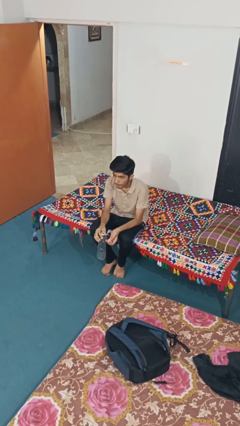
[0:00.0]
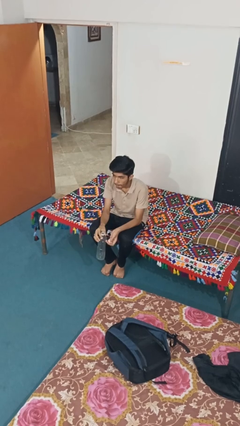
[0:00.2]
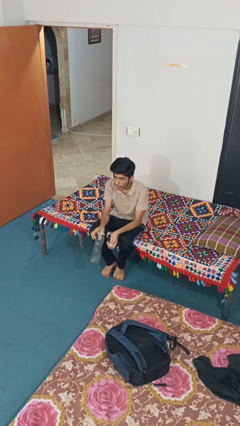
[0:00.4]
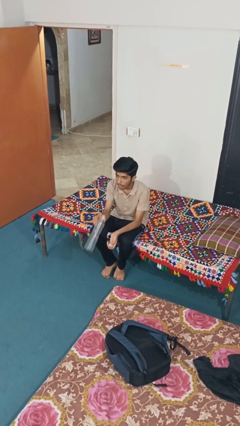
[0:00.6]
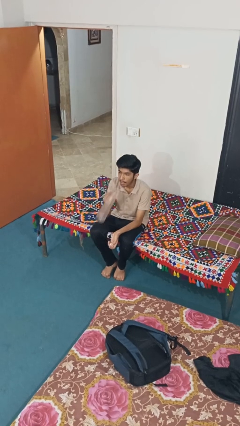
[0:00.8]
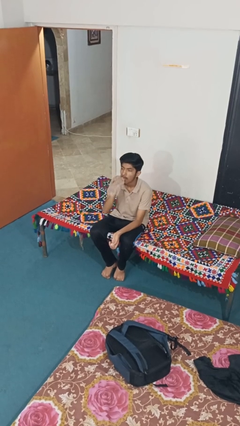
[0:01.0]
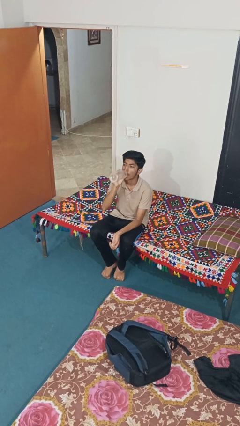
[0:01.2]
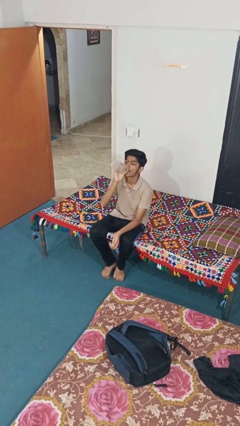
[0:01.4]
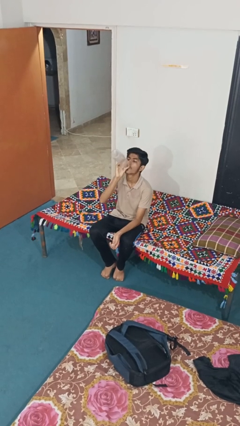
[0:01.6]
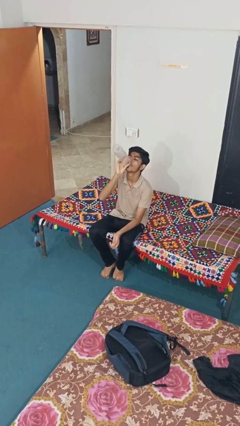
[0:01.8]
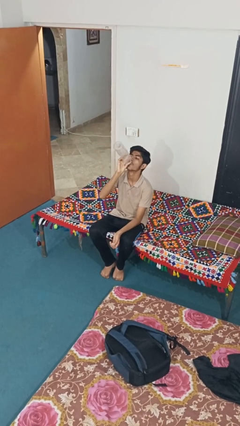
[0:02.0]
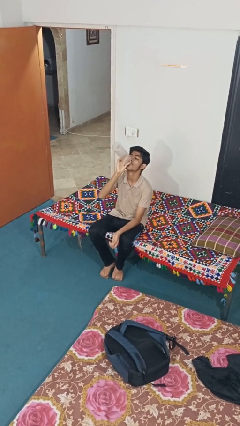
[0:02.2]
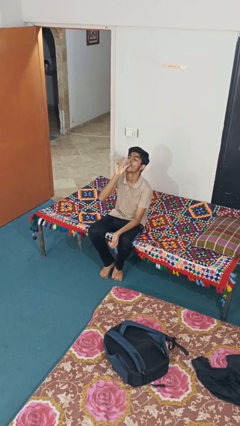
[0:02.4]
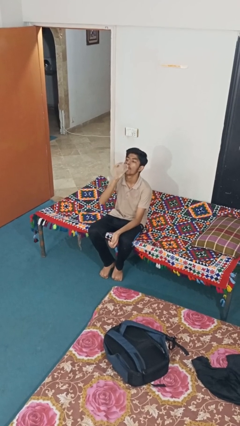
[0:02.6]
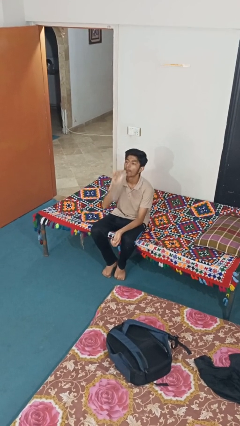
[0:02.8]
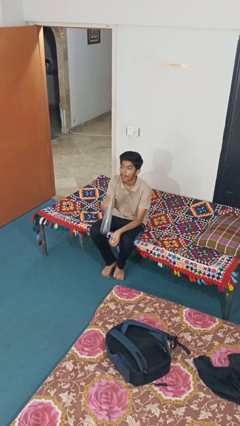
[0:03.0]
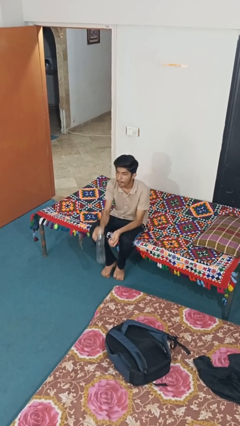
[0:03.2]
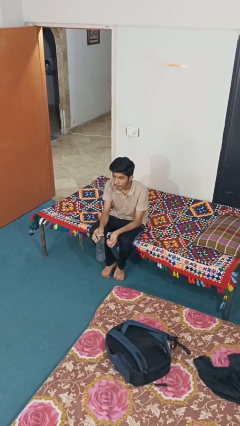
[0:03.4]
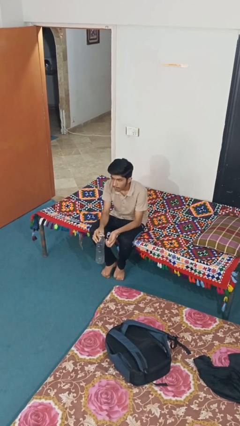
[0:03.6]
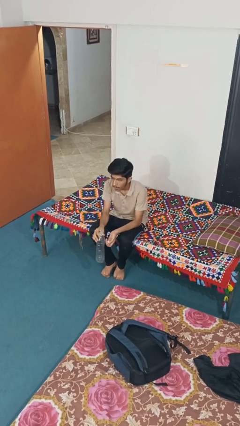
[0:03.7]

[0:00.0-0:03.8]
person drinks from bottle

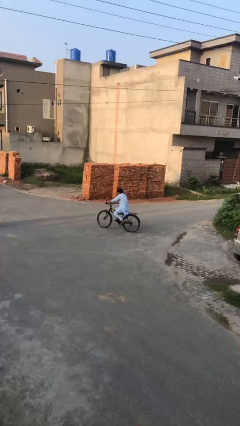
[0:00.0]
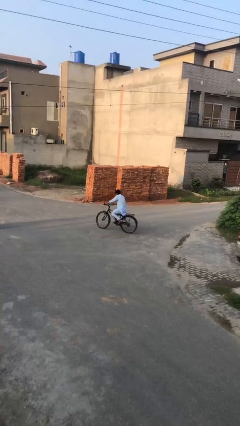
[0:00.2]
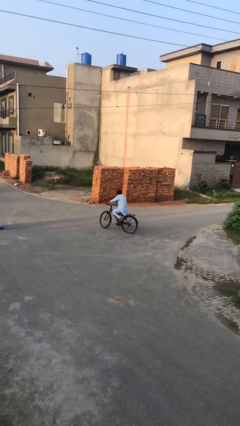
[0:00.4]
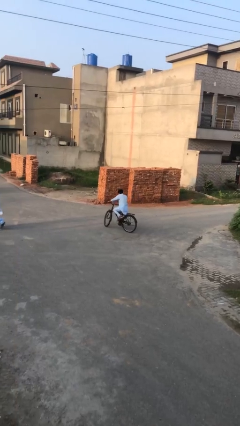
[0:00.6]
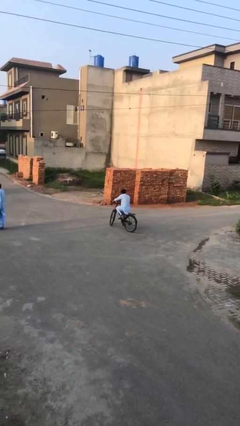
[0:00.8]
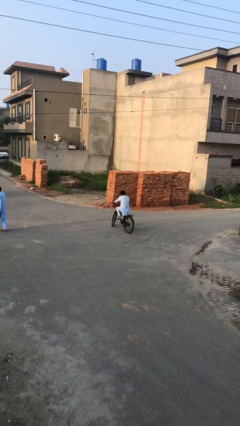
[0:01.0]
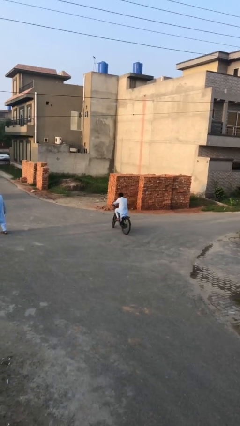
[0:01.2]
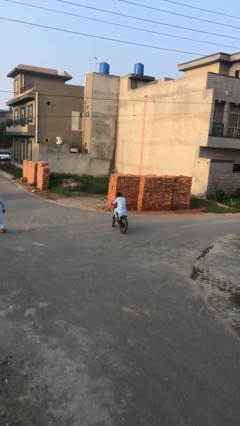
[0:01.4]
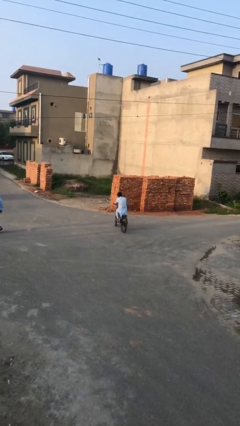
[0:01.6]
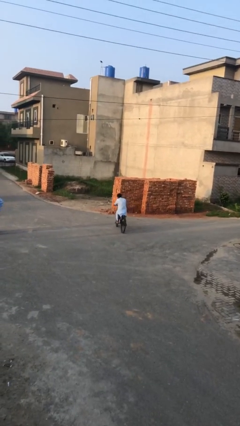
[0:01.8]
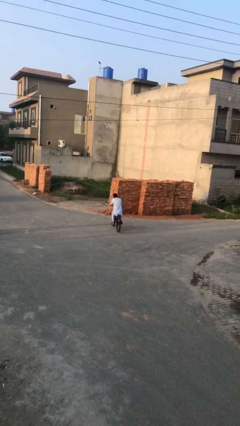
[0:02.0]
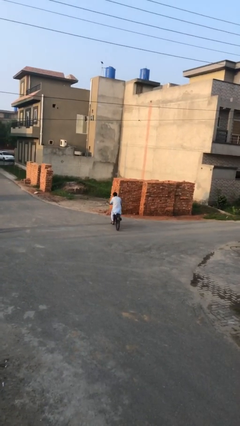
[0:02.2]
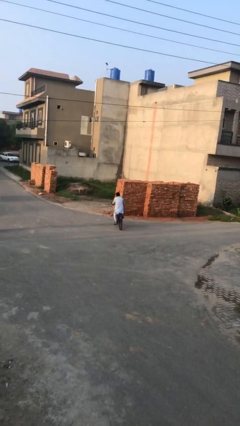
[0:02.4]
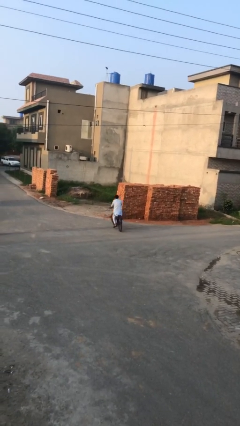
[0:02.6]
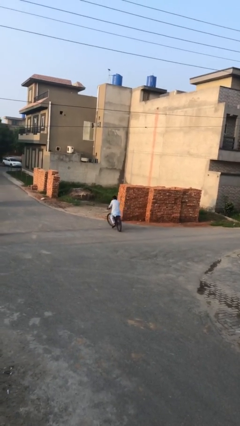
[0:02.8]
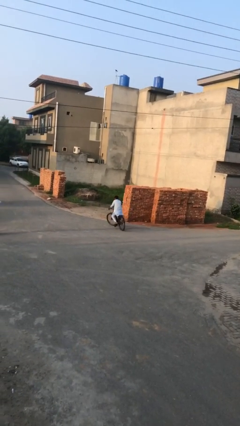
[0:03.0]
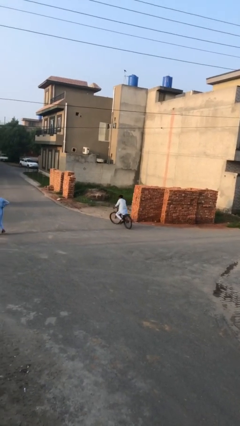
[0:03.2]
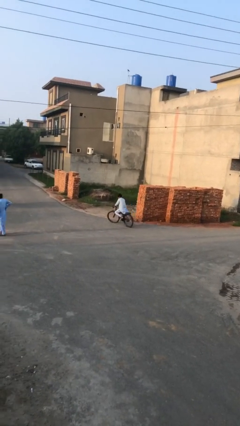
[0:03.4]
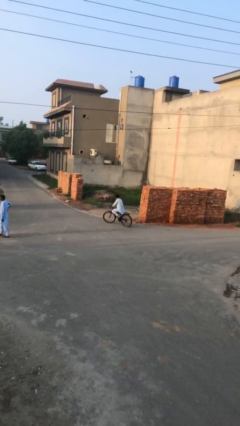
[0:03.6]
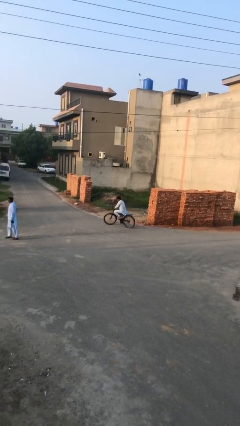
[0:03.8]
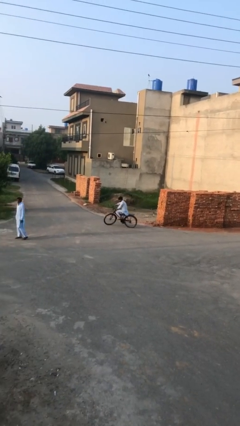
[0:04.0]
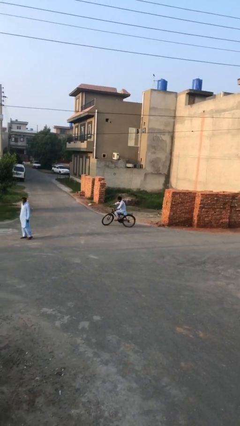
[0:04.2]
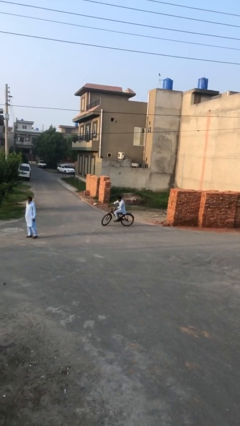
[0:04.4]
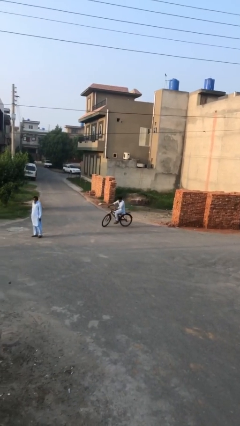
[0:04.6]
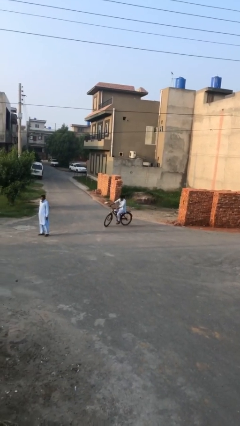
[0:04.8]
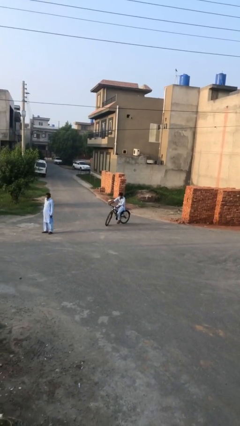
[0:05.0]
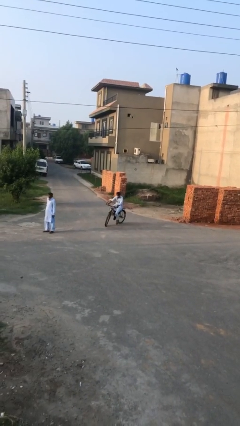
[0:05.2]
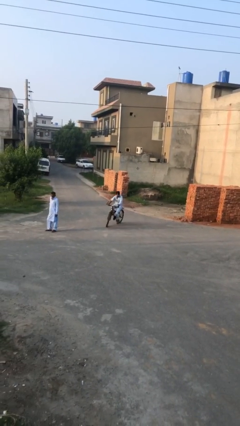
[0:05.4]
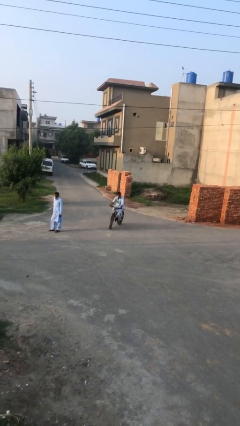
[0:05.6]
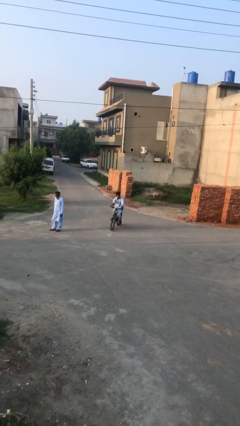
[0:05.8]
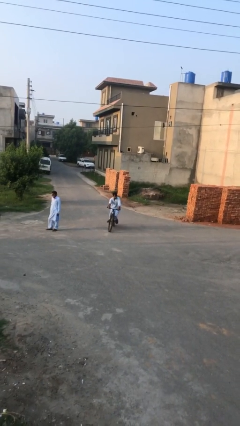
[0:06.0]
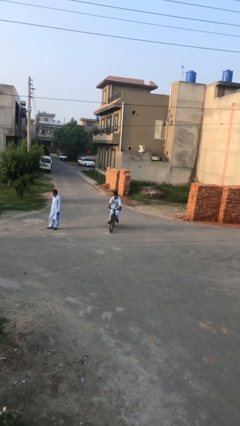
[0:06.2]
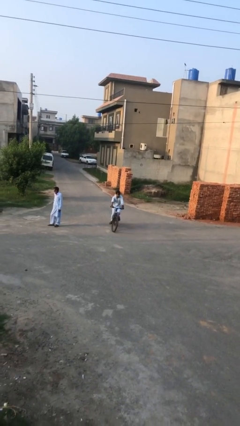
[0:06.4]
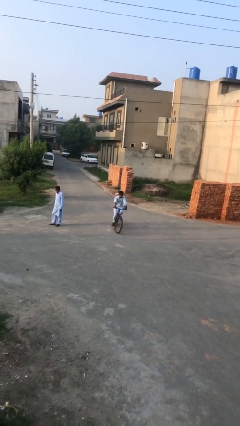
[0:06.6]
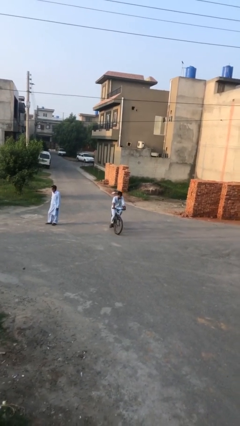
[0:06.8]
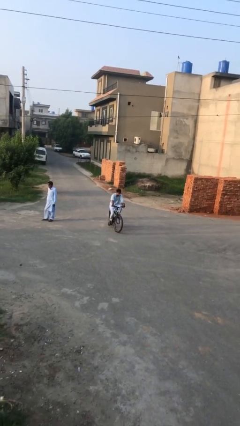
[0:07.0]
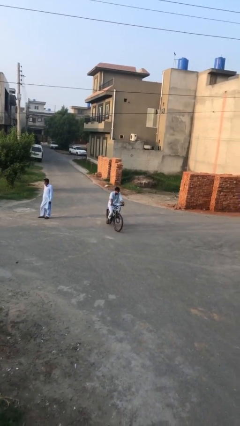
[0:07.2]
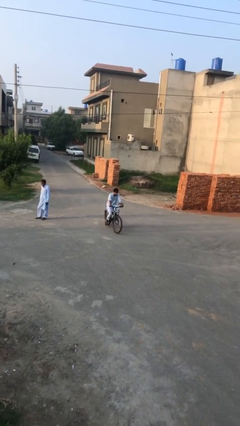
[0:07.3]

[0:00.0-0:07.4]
person rides bicycle

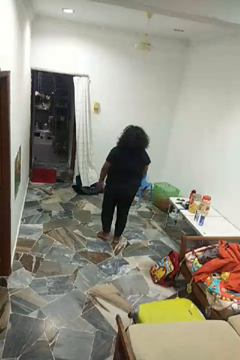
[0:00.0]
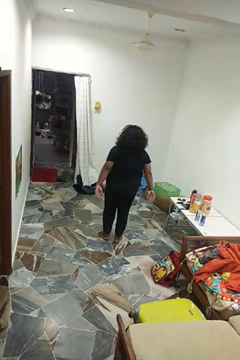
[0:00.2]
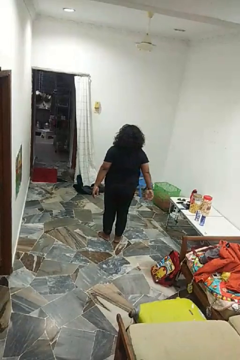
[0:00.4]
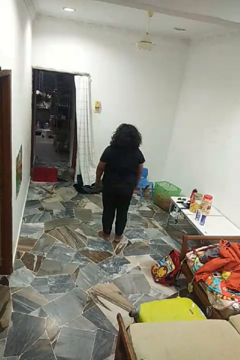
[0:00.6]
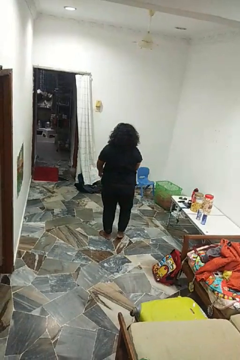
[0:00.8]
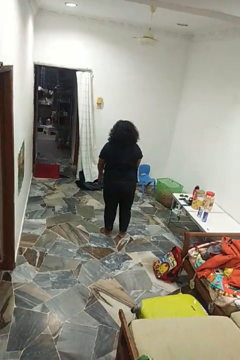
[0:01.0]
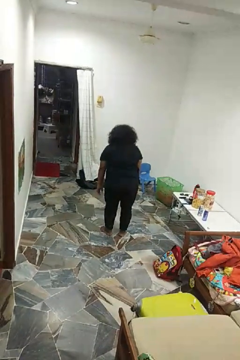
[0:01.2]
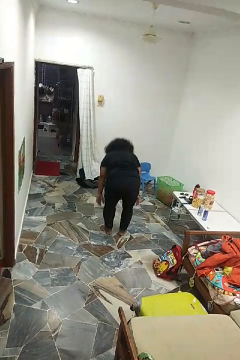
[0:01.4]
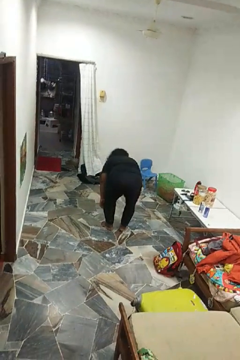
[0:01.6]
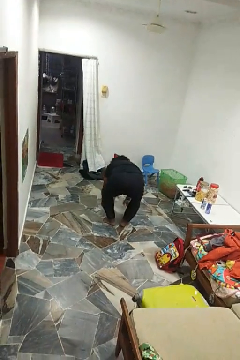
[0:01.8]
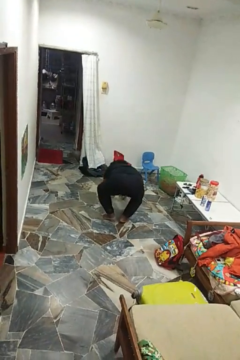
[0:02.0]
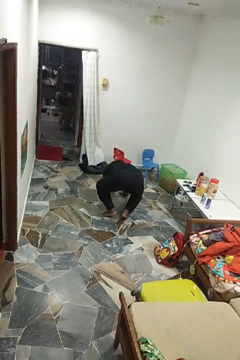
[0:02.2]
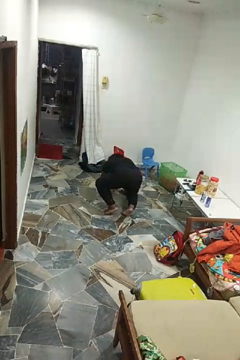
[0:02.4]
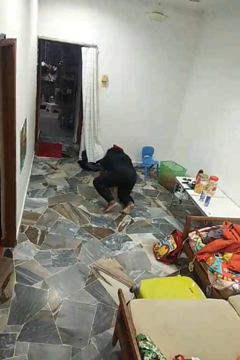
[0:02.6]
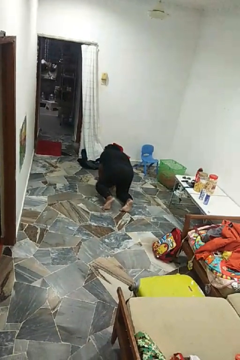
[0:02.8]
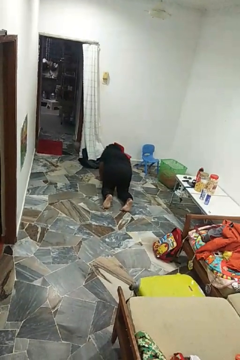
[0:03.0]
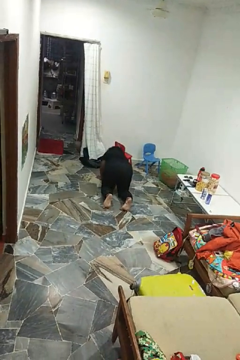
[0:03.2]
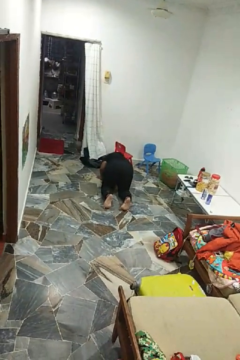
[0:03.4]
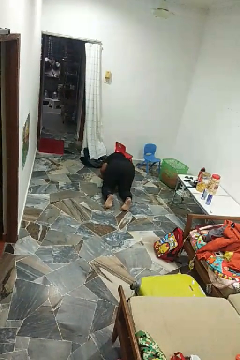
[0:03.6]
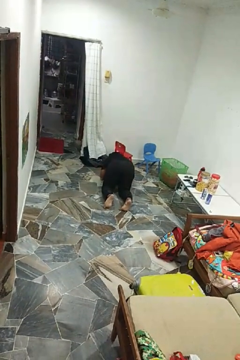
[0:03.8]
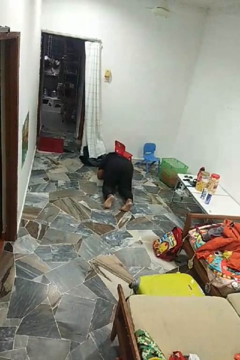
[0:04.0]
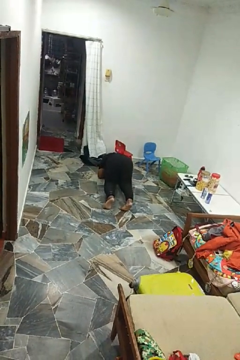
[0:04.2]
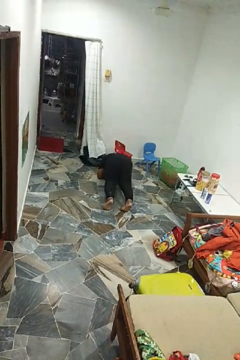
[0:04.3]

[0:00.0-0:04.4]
person exercises with plank

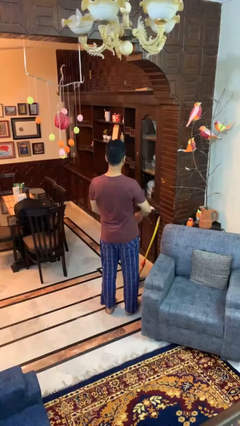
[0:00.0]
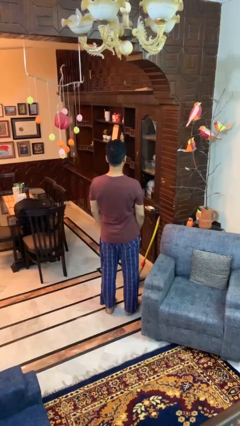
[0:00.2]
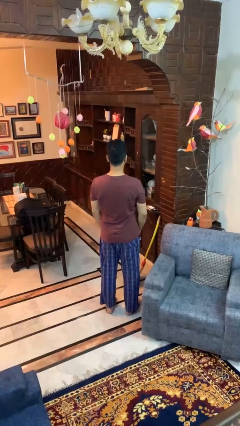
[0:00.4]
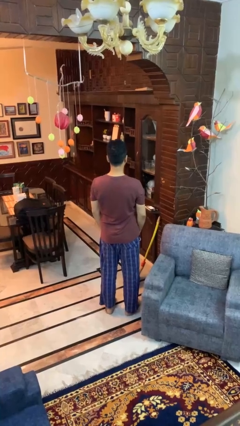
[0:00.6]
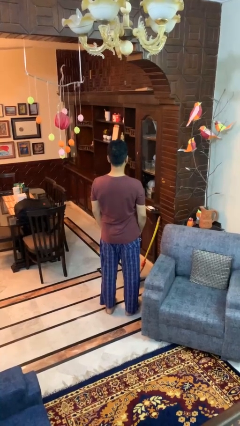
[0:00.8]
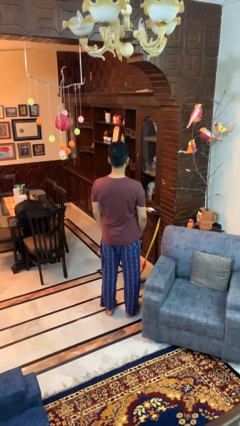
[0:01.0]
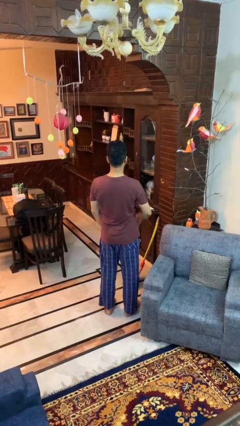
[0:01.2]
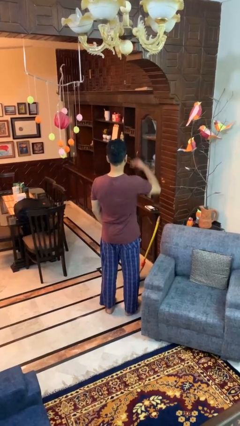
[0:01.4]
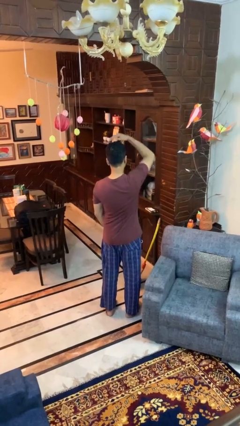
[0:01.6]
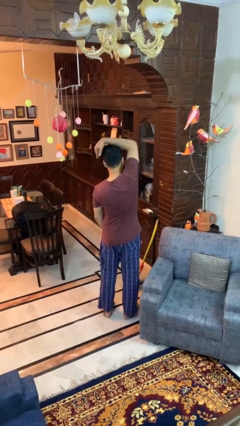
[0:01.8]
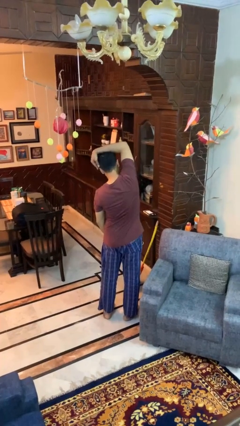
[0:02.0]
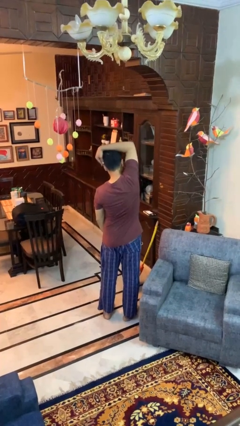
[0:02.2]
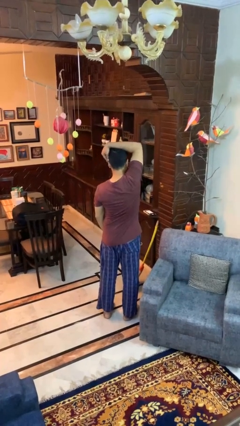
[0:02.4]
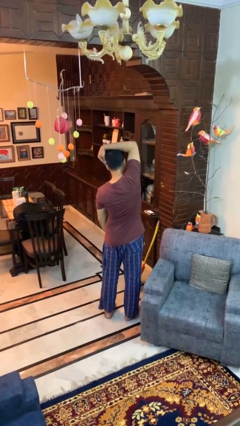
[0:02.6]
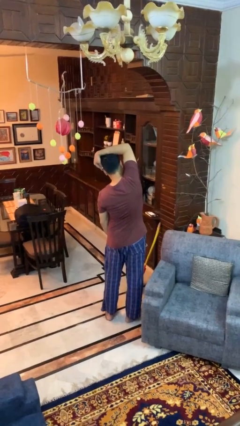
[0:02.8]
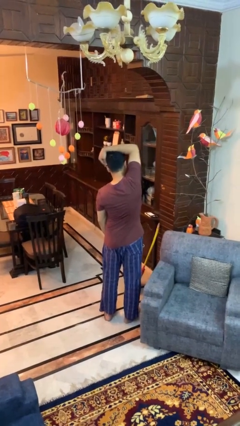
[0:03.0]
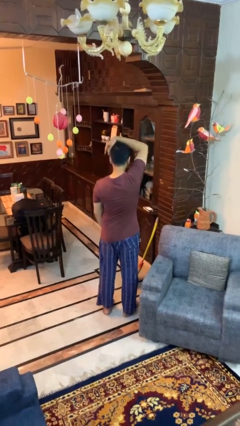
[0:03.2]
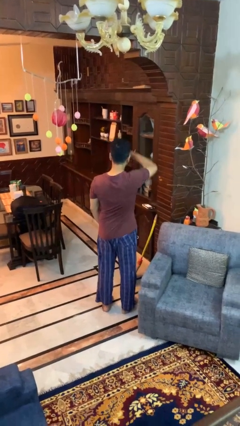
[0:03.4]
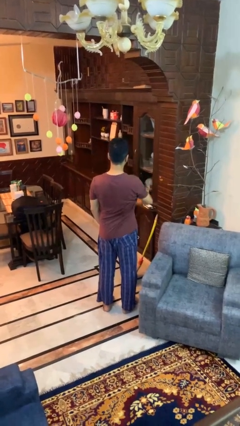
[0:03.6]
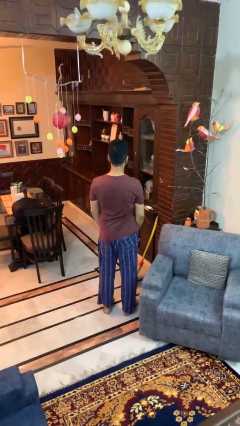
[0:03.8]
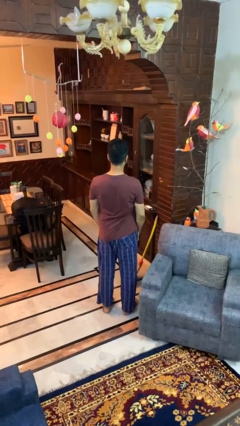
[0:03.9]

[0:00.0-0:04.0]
person stretches arms over head
